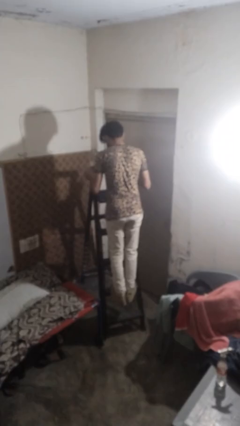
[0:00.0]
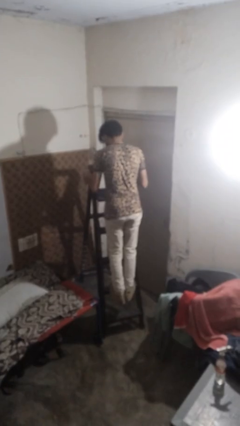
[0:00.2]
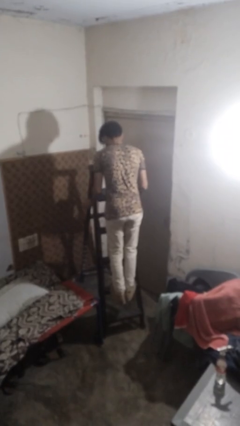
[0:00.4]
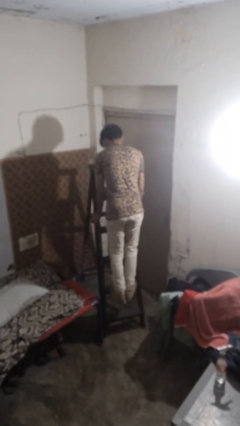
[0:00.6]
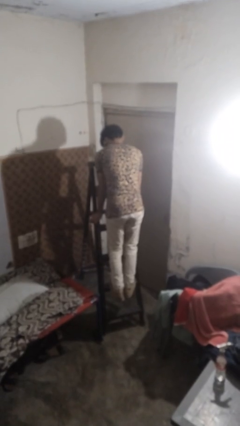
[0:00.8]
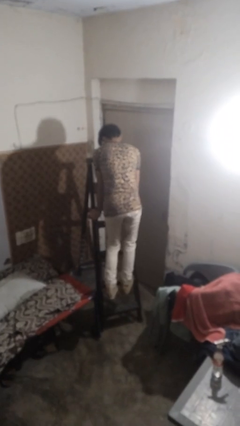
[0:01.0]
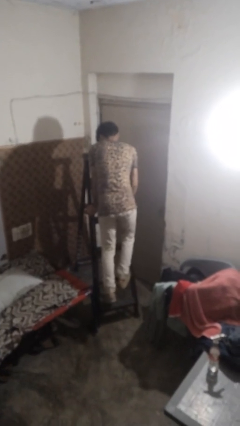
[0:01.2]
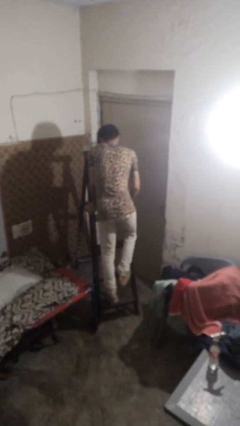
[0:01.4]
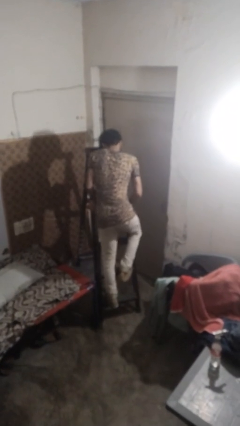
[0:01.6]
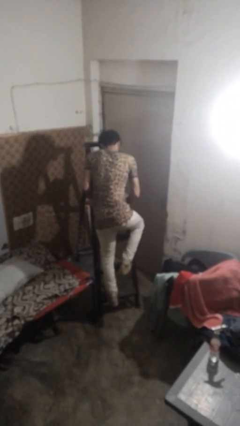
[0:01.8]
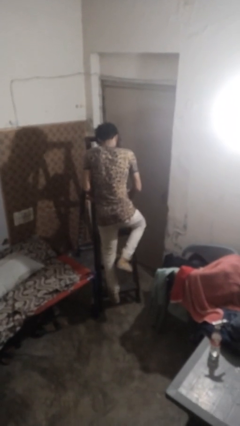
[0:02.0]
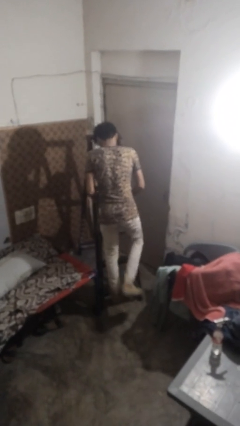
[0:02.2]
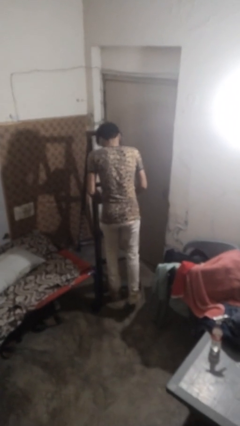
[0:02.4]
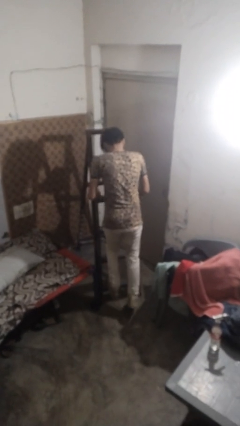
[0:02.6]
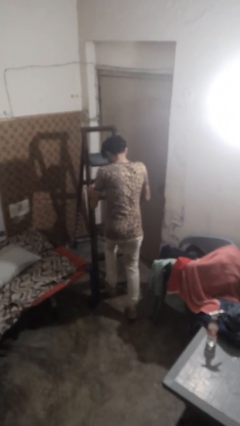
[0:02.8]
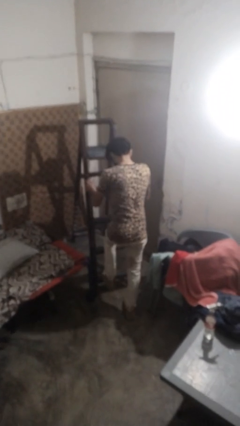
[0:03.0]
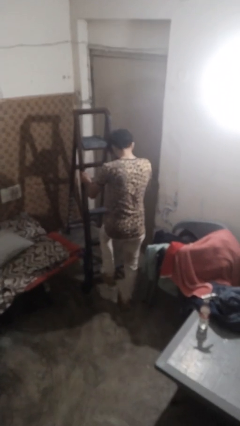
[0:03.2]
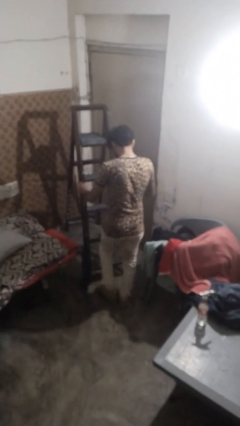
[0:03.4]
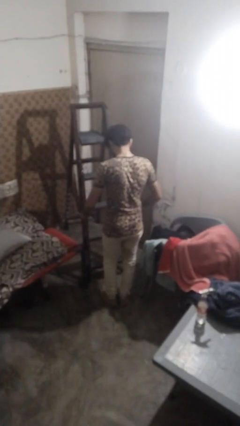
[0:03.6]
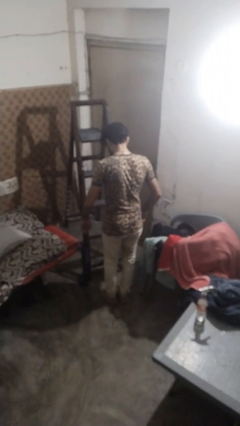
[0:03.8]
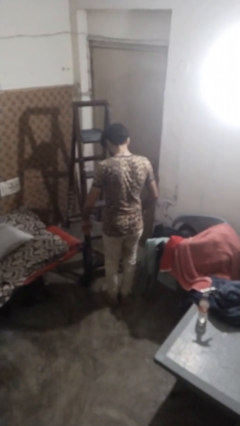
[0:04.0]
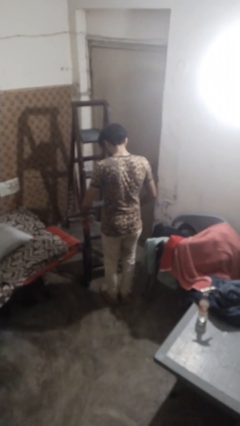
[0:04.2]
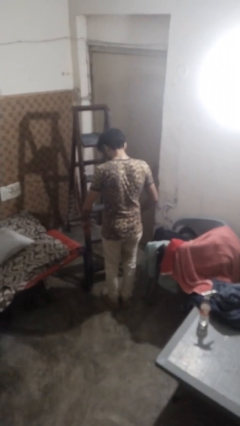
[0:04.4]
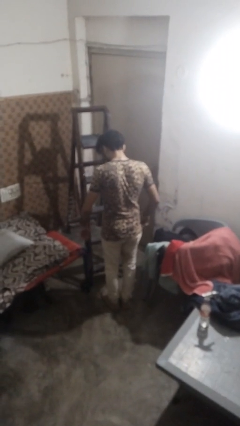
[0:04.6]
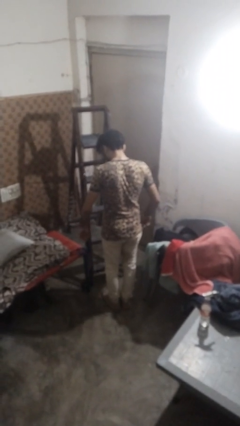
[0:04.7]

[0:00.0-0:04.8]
person climbs down ladder

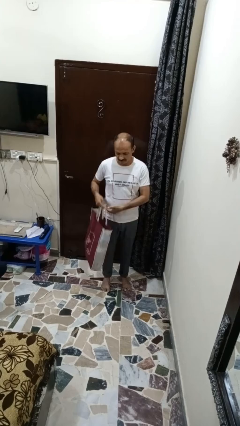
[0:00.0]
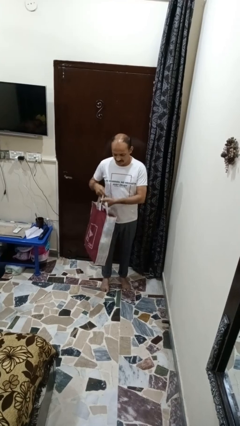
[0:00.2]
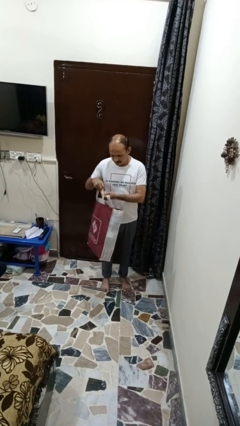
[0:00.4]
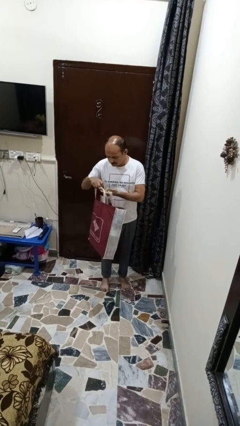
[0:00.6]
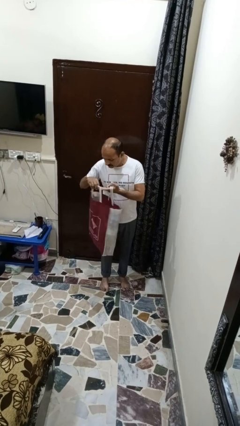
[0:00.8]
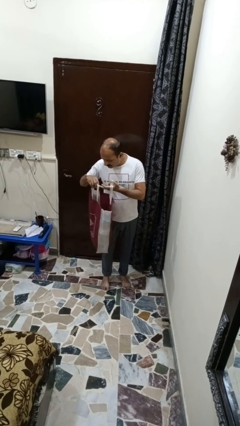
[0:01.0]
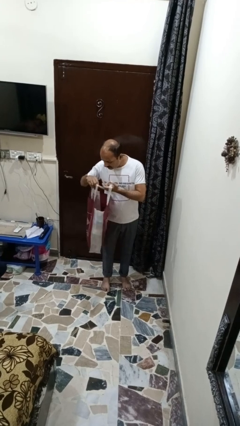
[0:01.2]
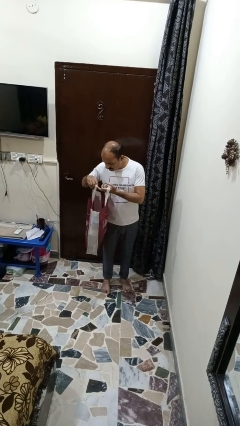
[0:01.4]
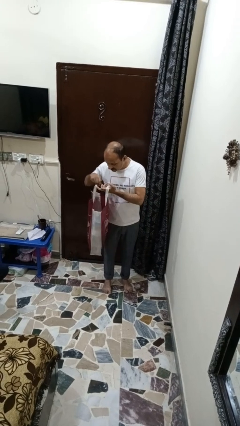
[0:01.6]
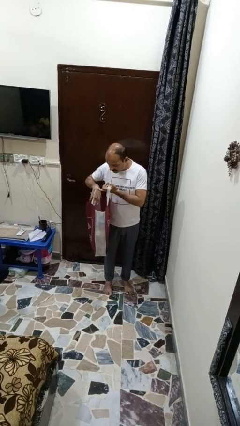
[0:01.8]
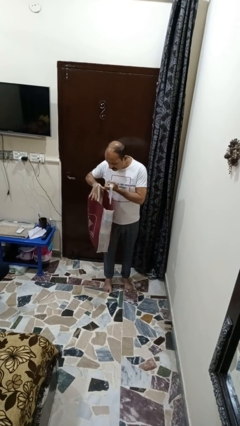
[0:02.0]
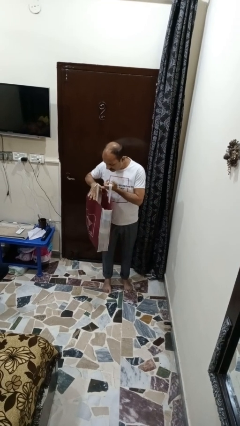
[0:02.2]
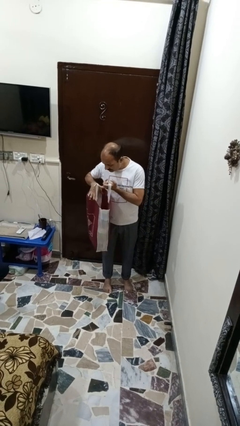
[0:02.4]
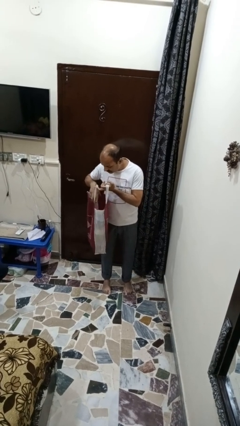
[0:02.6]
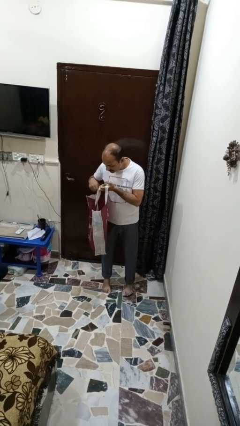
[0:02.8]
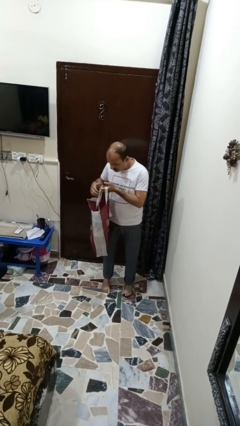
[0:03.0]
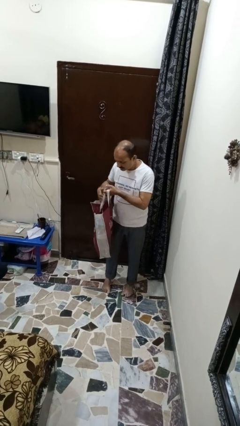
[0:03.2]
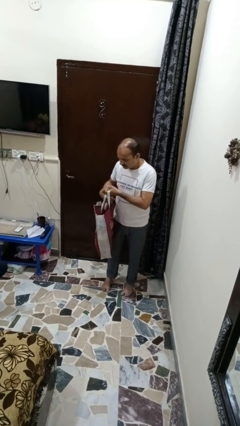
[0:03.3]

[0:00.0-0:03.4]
person searches in bag

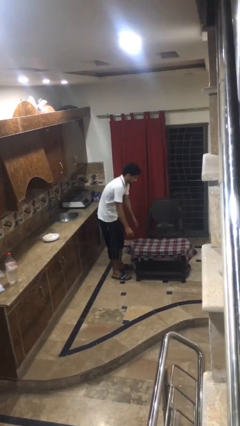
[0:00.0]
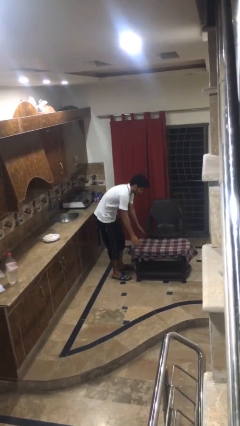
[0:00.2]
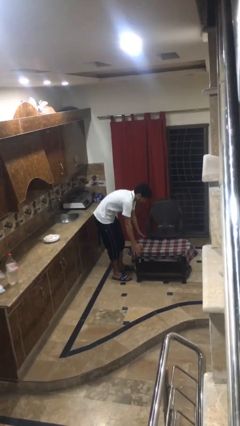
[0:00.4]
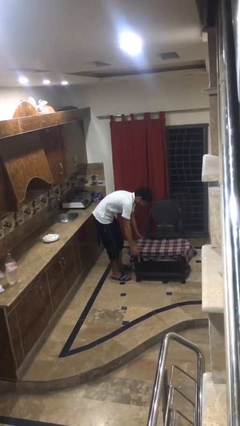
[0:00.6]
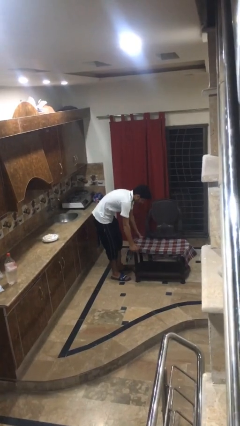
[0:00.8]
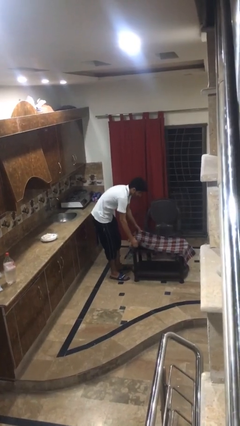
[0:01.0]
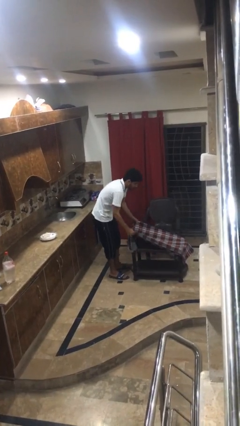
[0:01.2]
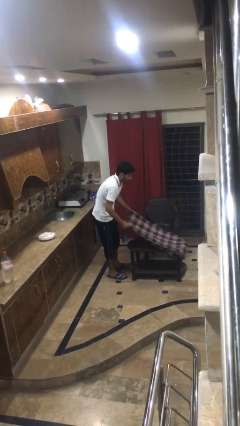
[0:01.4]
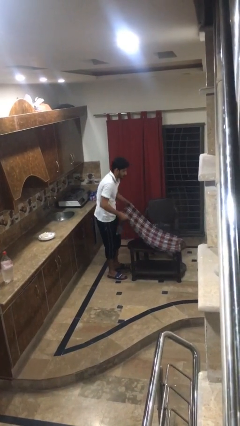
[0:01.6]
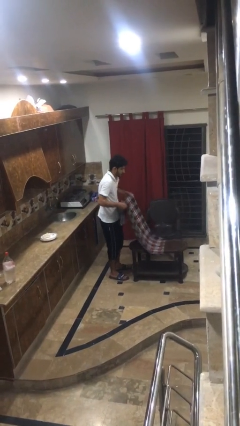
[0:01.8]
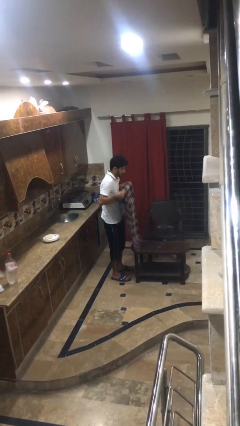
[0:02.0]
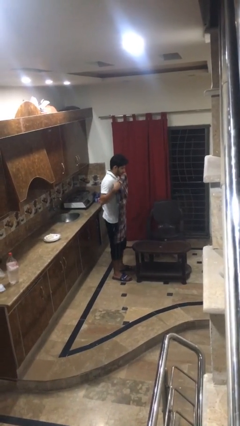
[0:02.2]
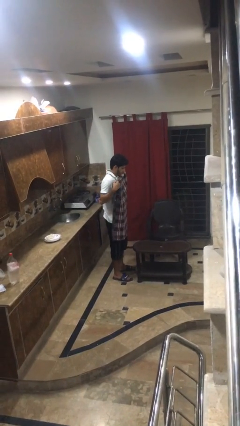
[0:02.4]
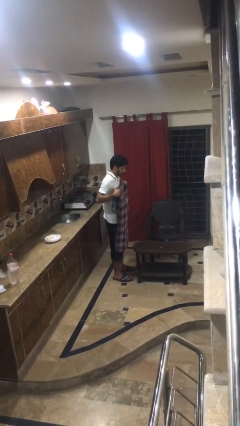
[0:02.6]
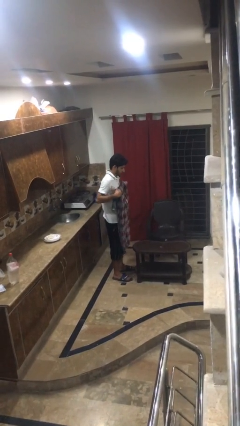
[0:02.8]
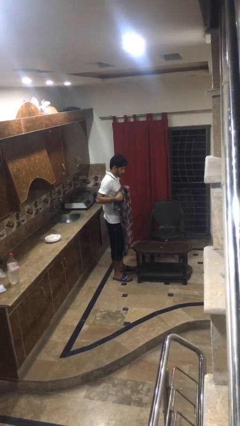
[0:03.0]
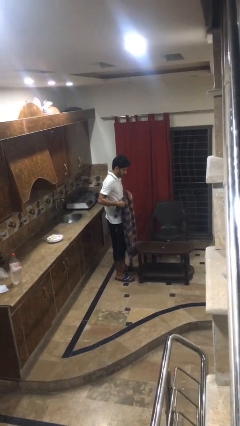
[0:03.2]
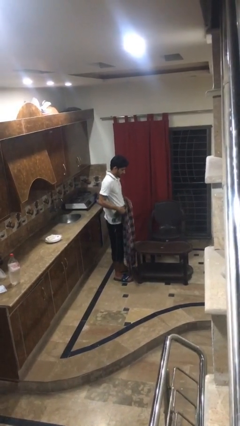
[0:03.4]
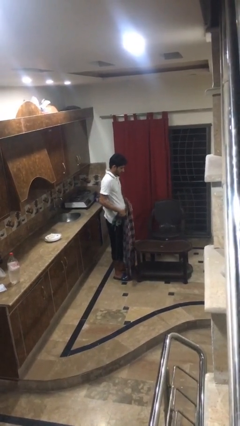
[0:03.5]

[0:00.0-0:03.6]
person folds tablecloth

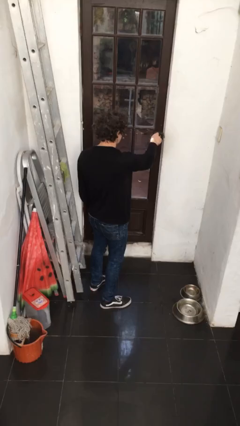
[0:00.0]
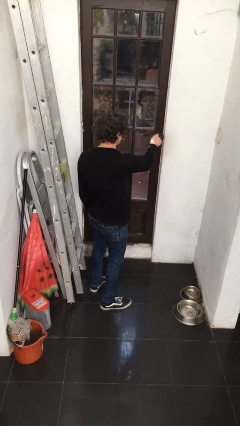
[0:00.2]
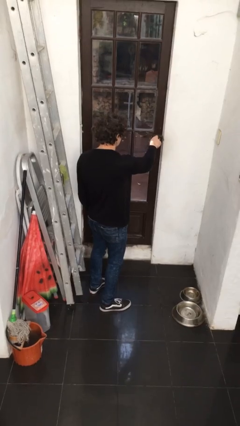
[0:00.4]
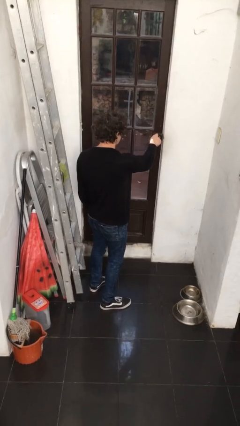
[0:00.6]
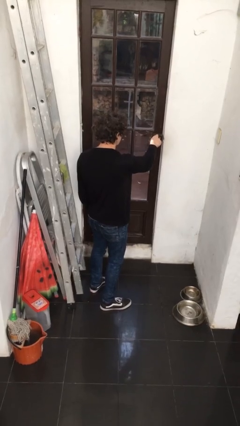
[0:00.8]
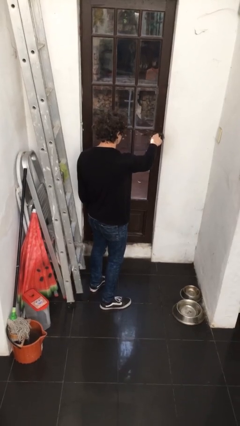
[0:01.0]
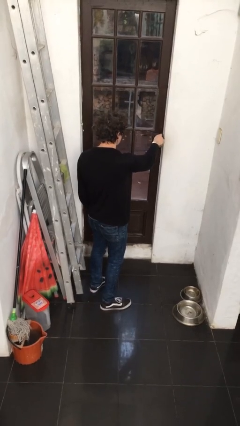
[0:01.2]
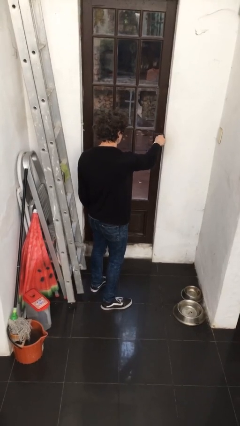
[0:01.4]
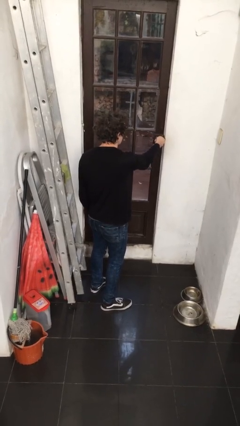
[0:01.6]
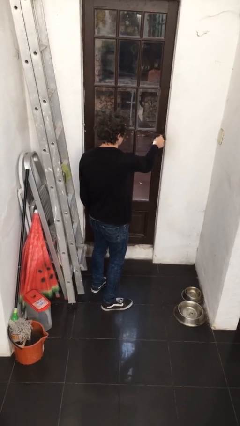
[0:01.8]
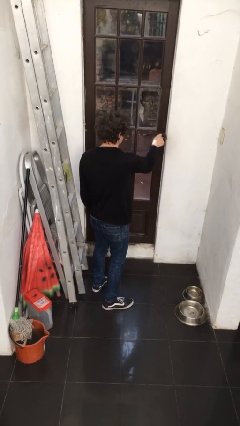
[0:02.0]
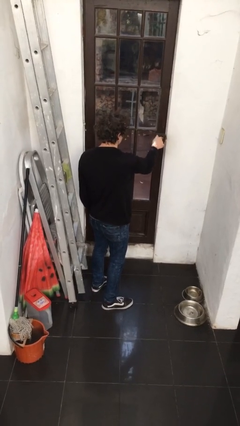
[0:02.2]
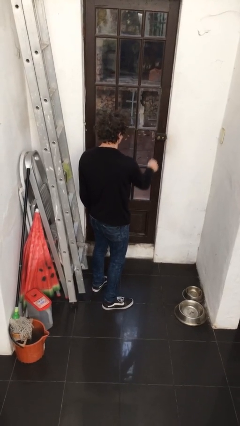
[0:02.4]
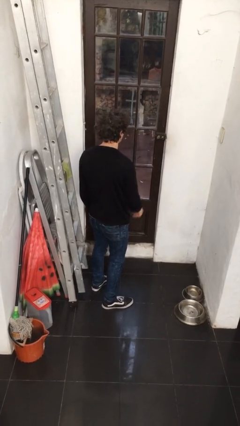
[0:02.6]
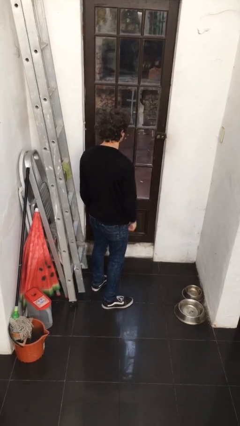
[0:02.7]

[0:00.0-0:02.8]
person locks door with keys

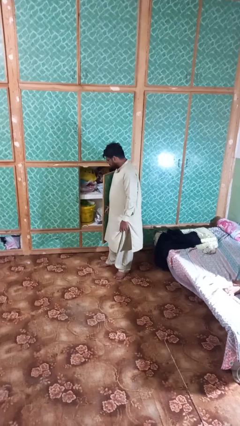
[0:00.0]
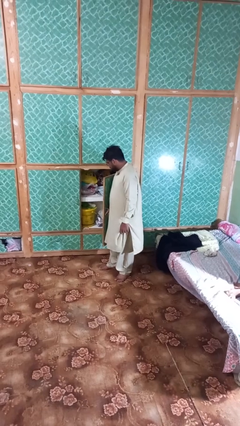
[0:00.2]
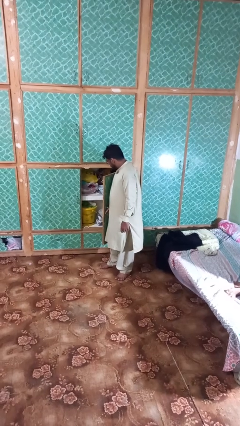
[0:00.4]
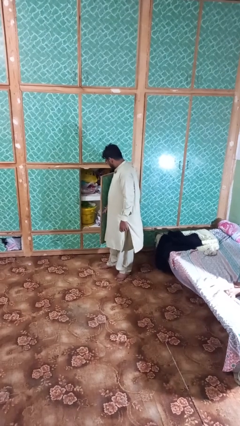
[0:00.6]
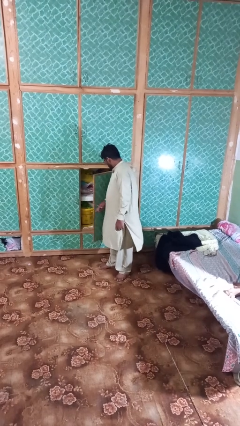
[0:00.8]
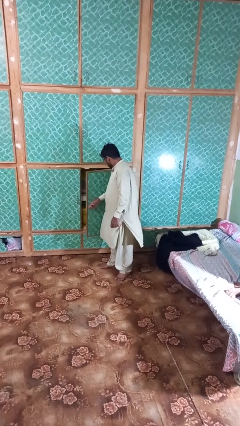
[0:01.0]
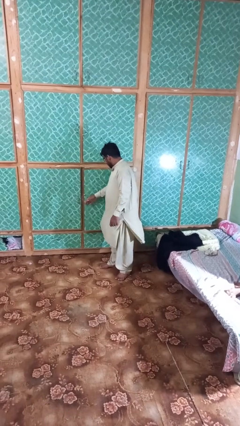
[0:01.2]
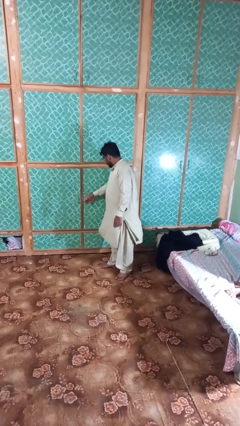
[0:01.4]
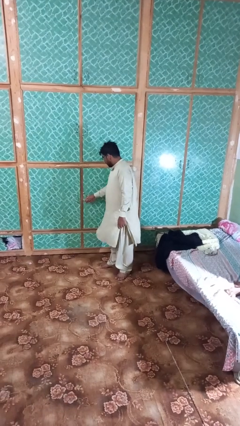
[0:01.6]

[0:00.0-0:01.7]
person closes closet door

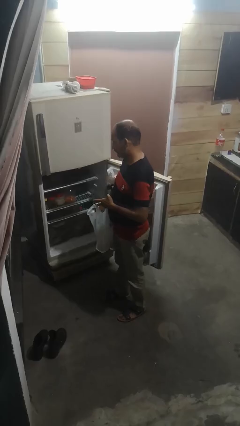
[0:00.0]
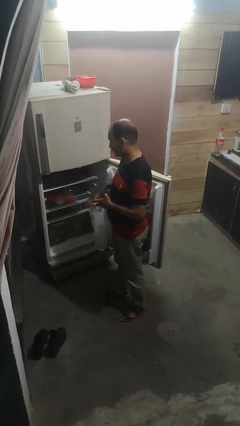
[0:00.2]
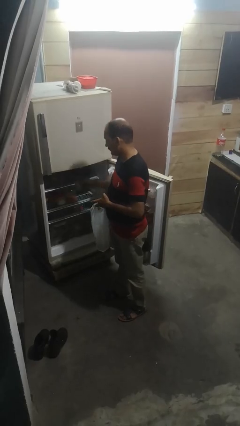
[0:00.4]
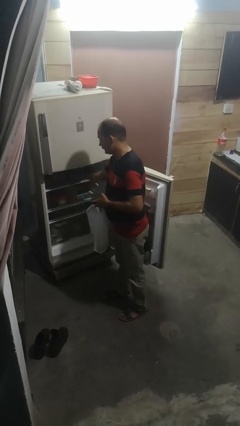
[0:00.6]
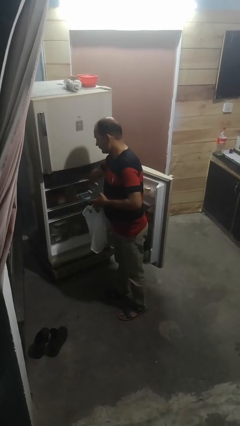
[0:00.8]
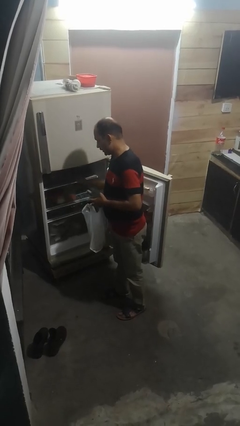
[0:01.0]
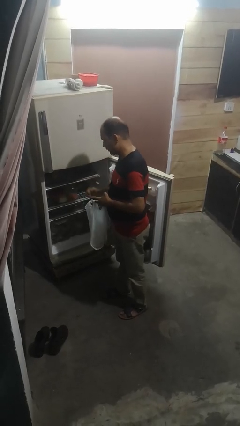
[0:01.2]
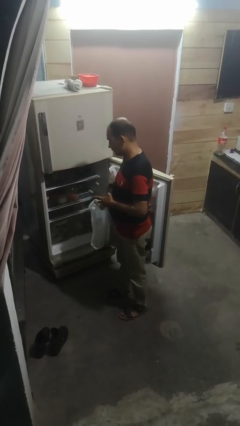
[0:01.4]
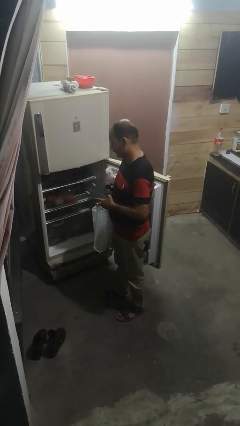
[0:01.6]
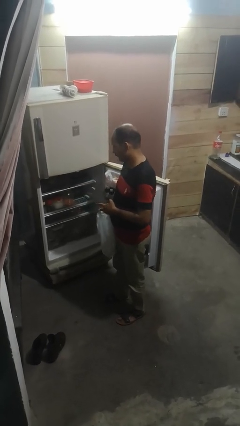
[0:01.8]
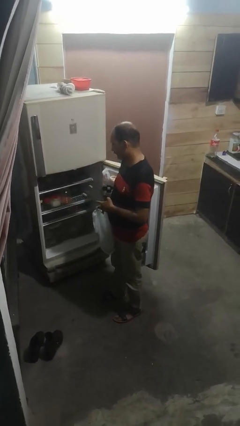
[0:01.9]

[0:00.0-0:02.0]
person loads groceries into refrigerator
